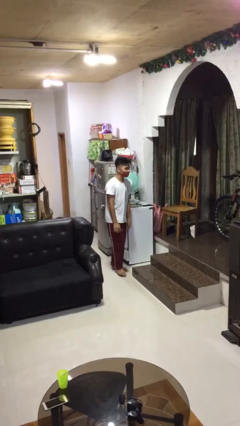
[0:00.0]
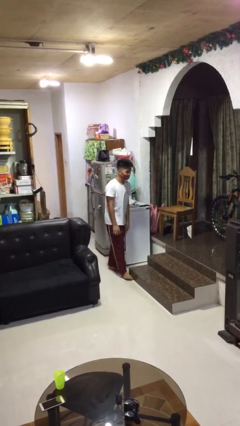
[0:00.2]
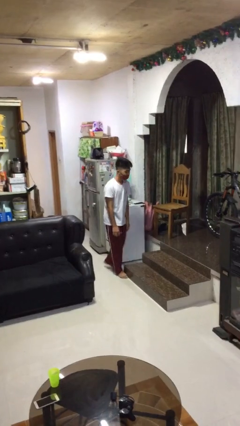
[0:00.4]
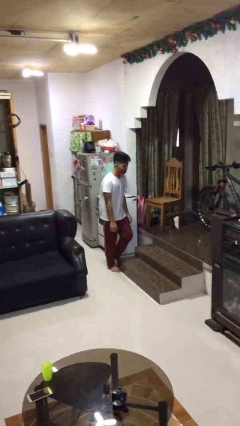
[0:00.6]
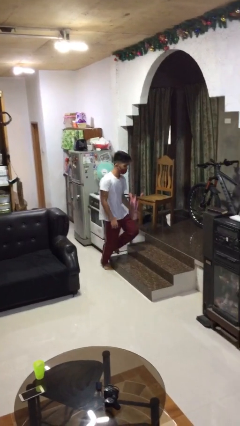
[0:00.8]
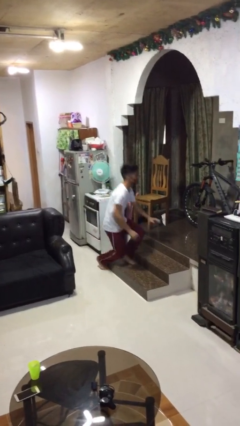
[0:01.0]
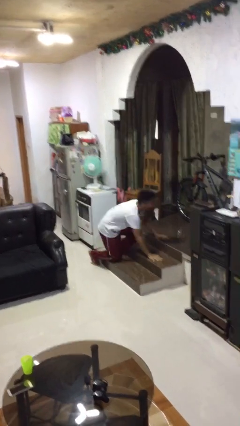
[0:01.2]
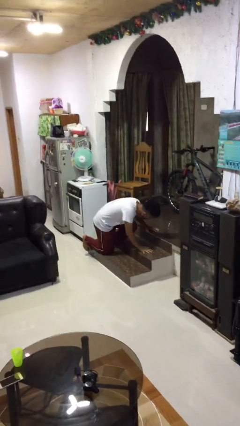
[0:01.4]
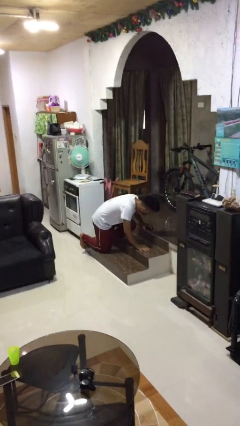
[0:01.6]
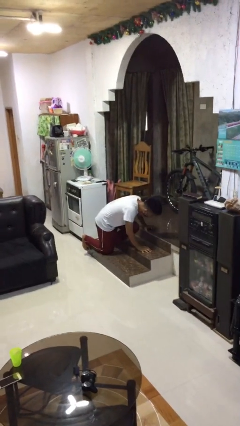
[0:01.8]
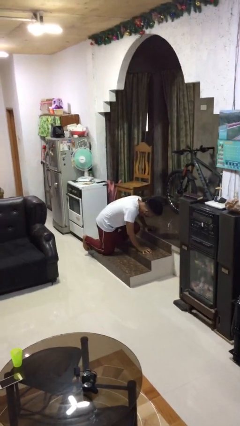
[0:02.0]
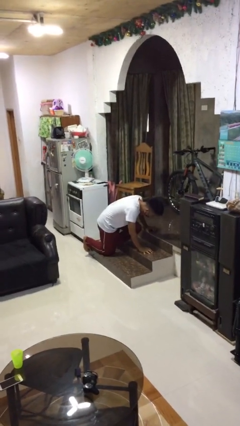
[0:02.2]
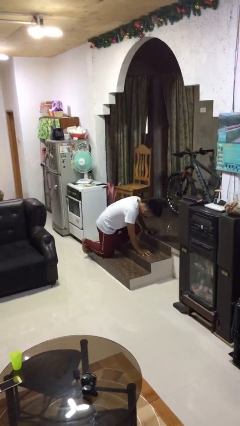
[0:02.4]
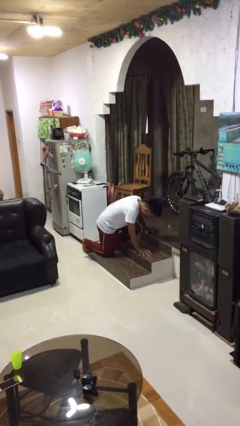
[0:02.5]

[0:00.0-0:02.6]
person trips on object on floor

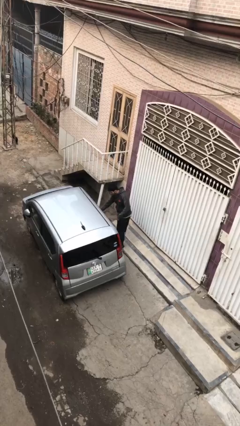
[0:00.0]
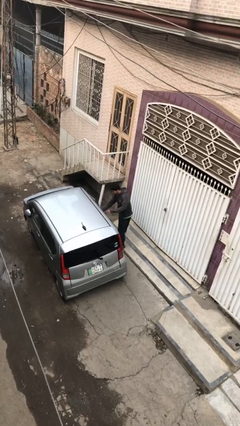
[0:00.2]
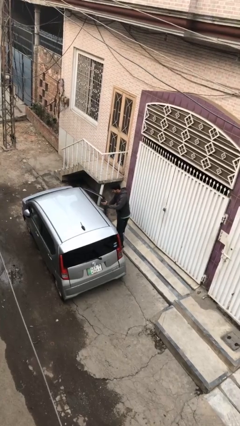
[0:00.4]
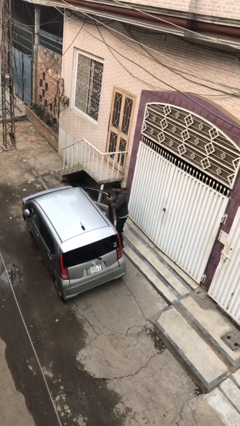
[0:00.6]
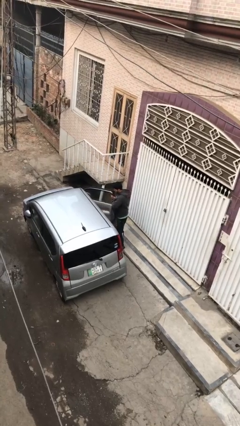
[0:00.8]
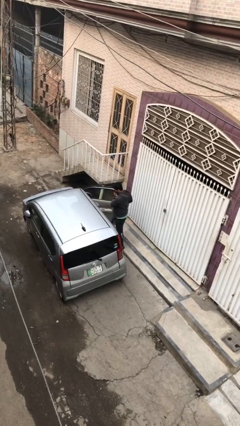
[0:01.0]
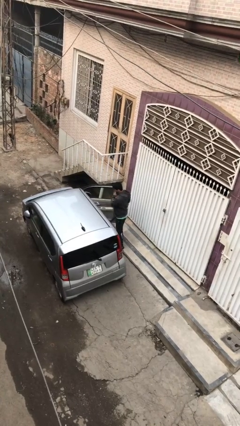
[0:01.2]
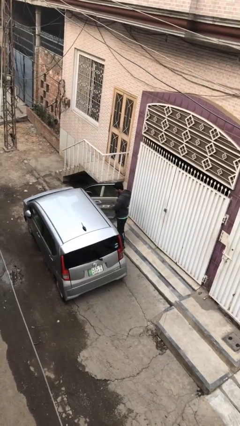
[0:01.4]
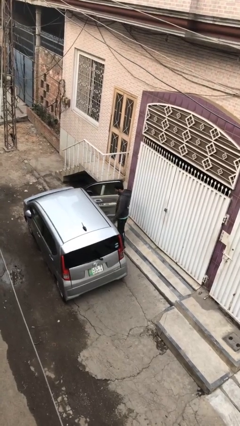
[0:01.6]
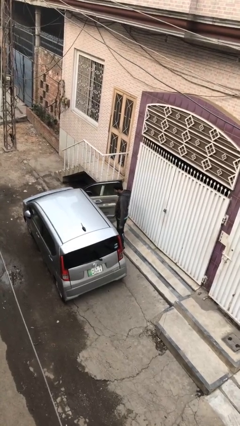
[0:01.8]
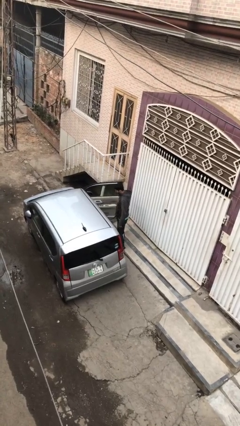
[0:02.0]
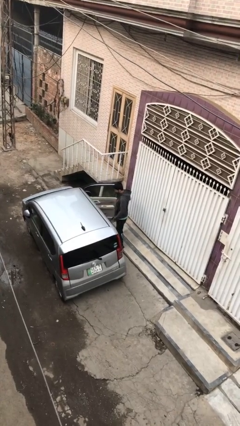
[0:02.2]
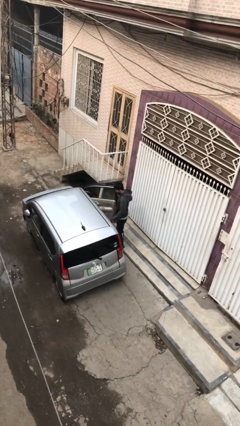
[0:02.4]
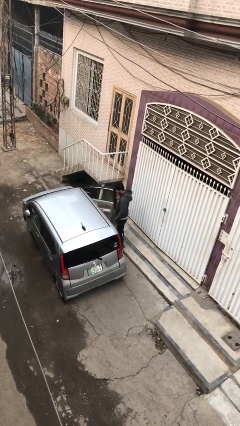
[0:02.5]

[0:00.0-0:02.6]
person opens car door

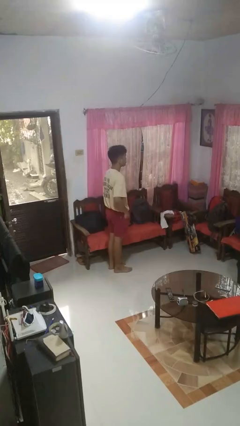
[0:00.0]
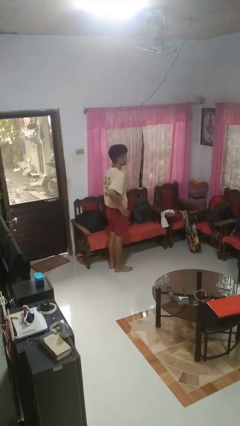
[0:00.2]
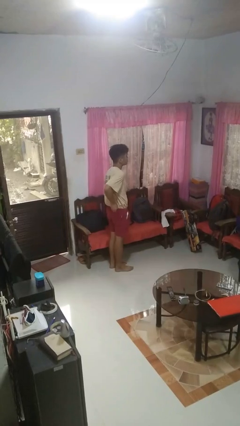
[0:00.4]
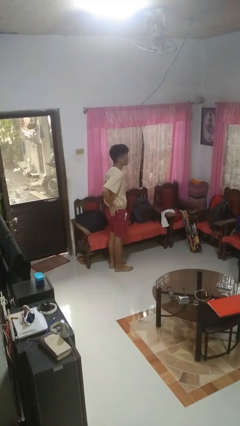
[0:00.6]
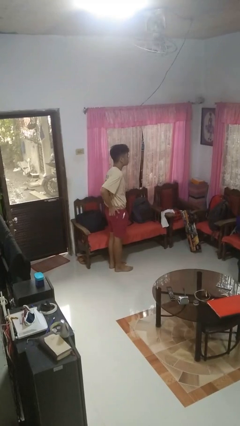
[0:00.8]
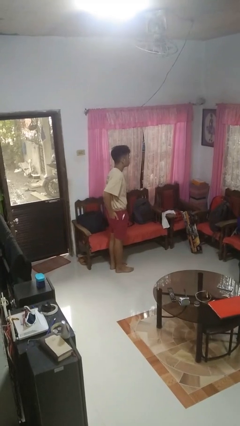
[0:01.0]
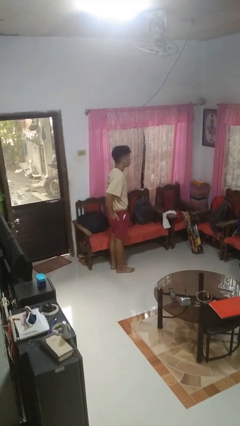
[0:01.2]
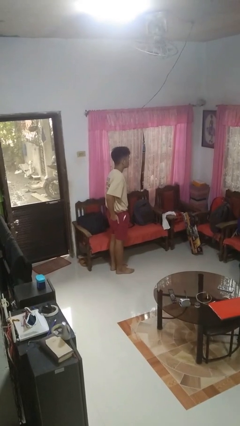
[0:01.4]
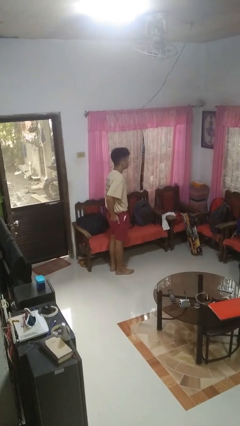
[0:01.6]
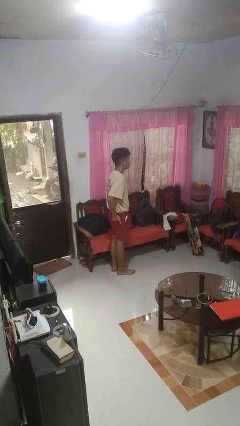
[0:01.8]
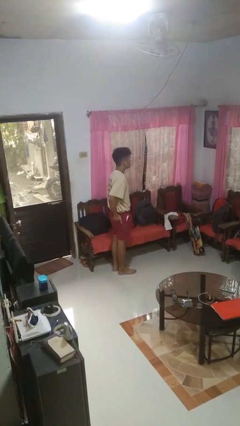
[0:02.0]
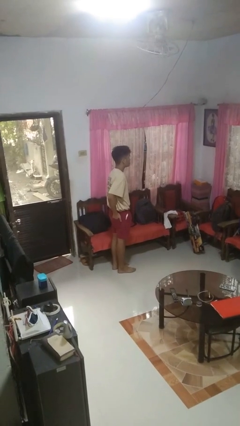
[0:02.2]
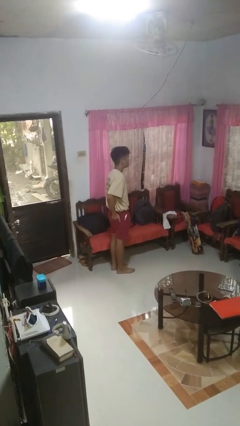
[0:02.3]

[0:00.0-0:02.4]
person puts hands in back pockets

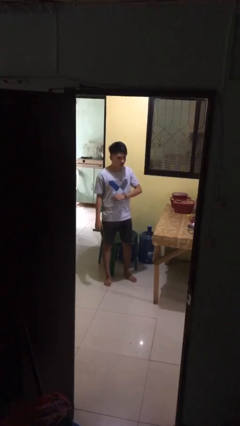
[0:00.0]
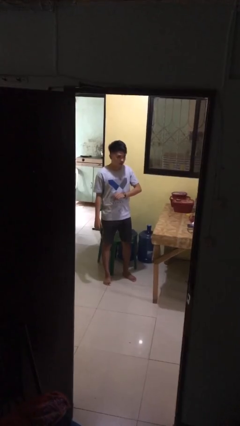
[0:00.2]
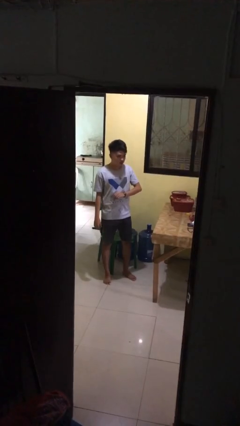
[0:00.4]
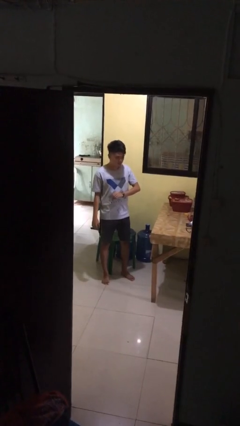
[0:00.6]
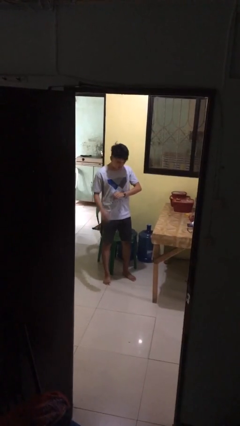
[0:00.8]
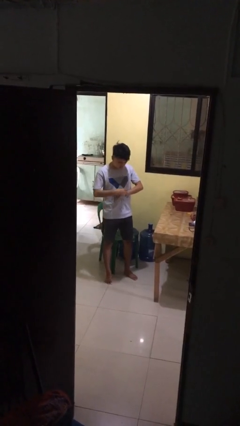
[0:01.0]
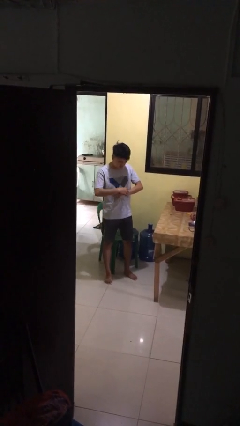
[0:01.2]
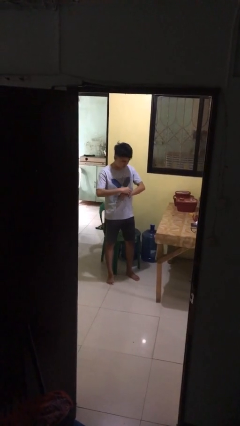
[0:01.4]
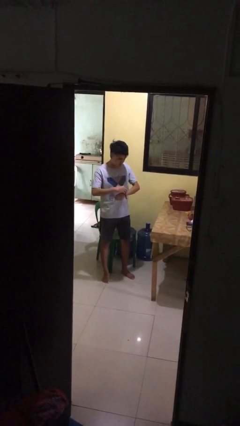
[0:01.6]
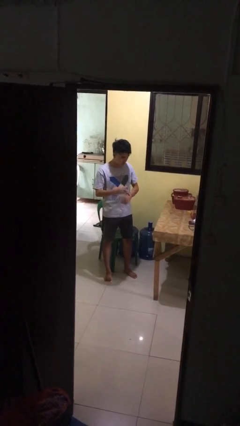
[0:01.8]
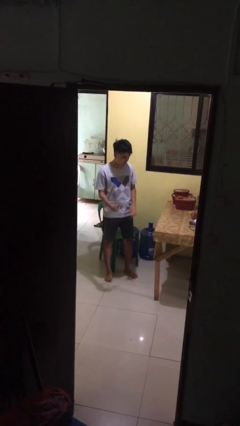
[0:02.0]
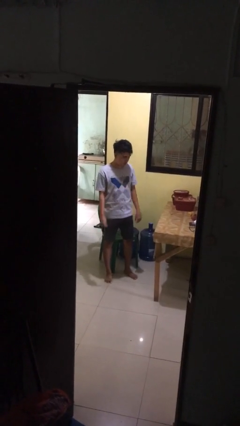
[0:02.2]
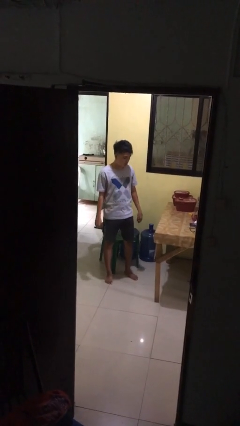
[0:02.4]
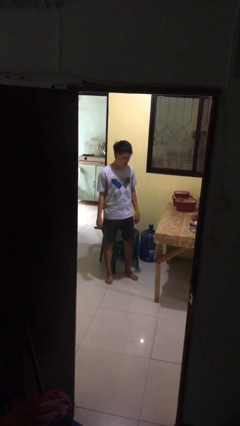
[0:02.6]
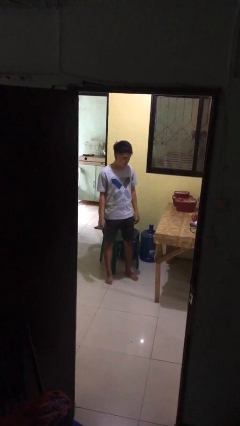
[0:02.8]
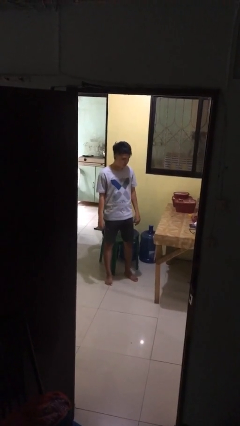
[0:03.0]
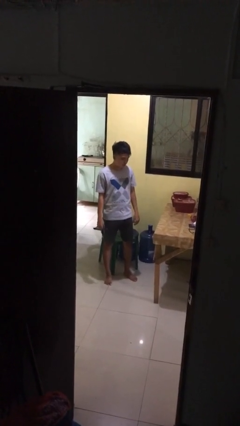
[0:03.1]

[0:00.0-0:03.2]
person takes off wristwatch

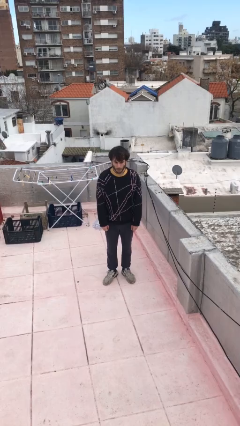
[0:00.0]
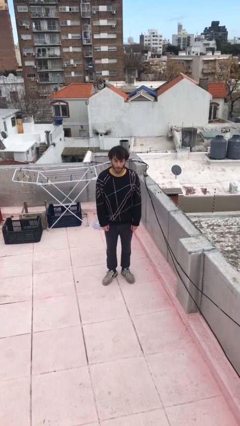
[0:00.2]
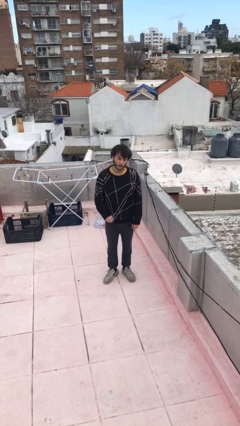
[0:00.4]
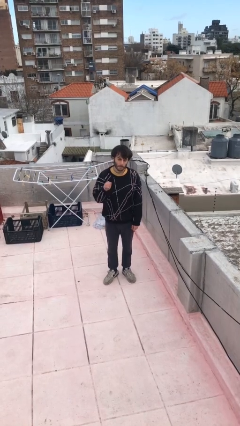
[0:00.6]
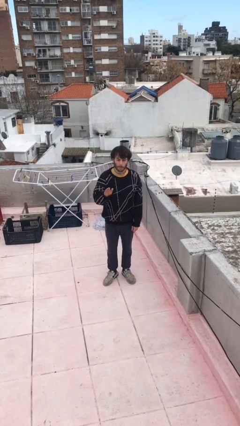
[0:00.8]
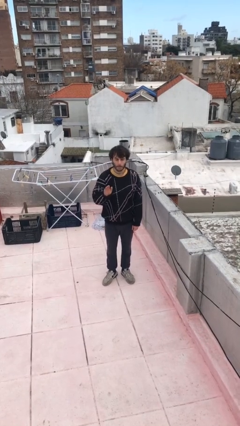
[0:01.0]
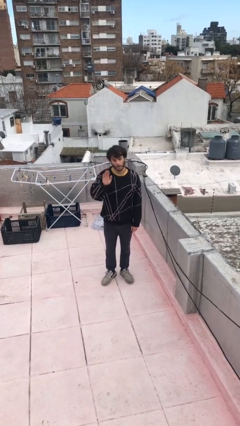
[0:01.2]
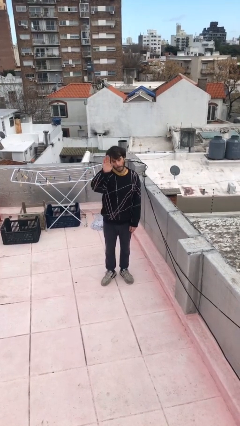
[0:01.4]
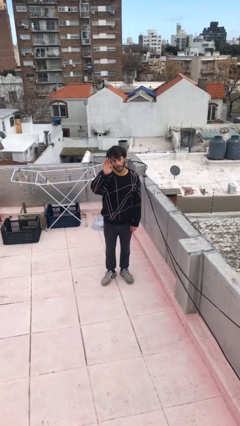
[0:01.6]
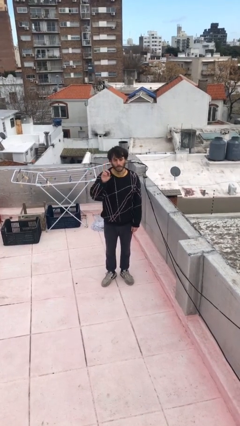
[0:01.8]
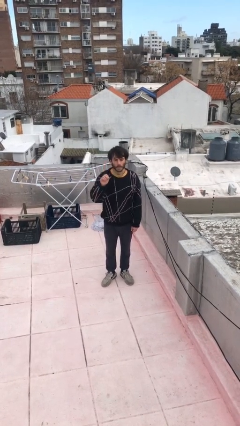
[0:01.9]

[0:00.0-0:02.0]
person gestures swipe up

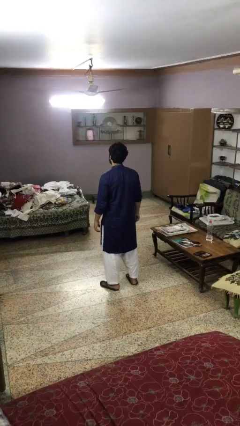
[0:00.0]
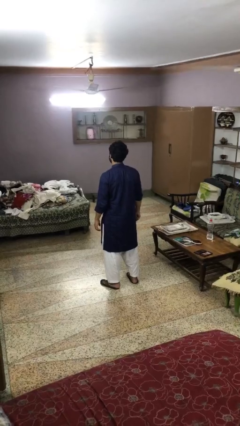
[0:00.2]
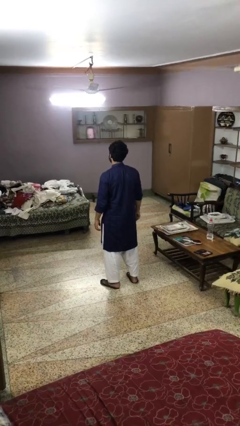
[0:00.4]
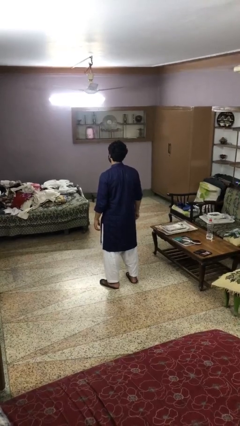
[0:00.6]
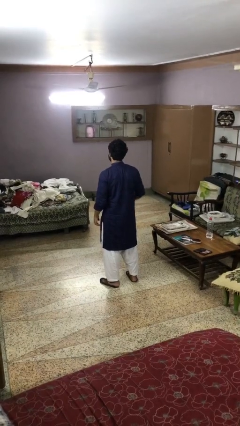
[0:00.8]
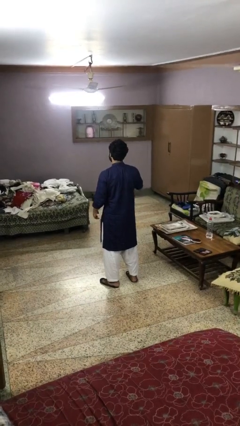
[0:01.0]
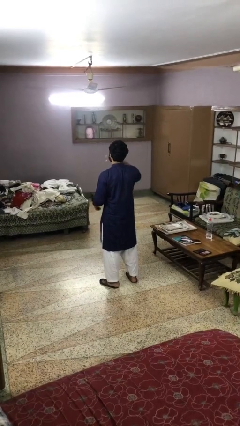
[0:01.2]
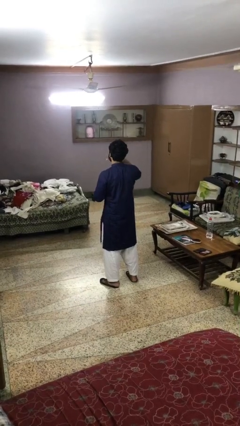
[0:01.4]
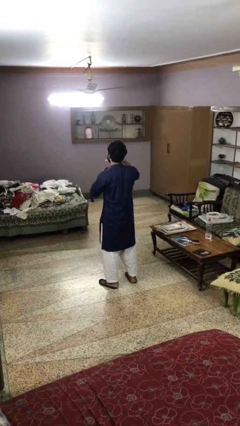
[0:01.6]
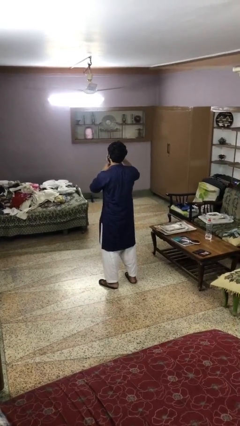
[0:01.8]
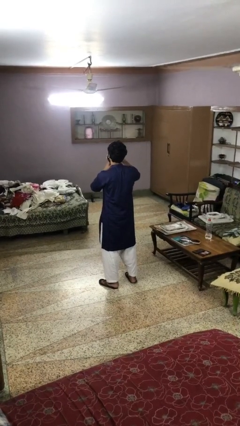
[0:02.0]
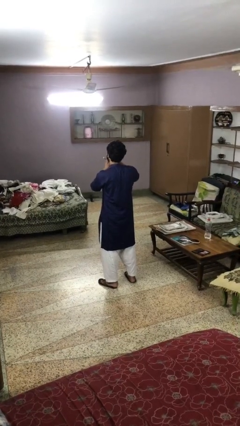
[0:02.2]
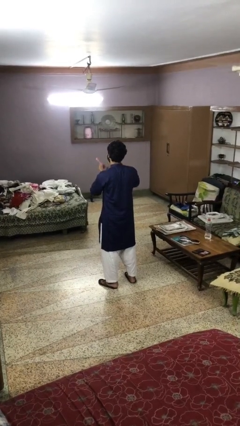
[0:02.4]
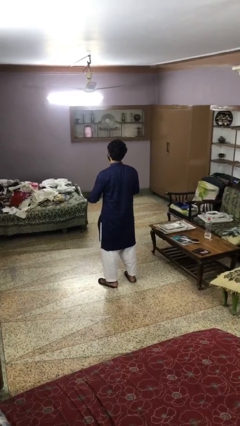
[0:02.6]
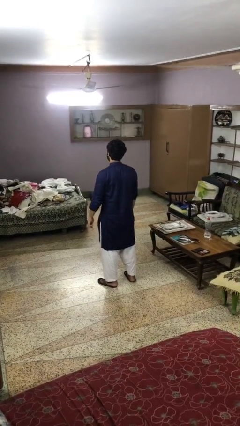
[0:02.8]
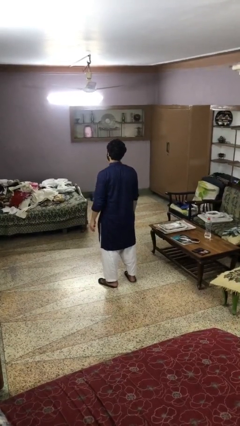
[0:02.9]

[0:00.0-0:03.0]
person brushes teeth

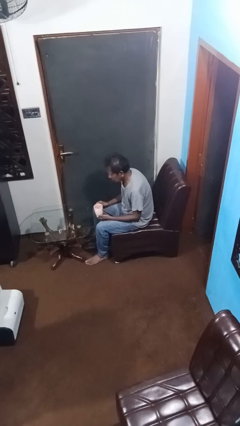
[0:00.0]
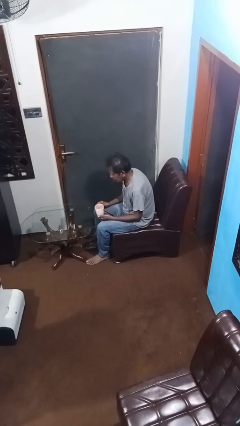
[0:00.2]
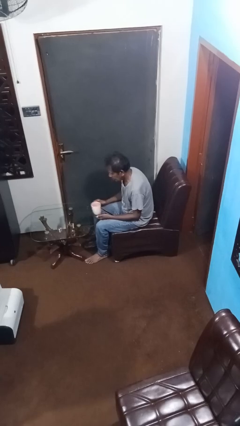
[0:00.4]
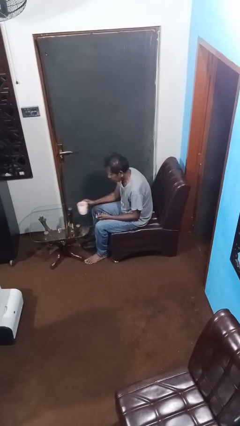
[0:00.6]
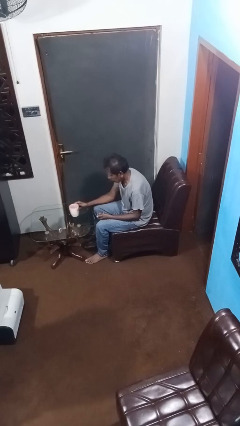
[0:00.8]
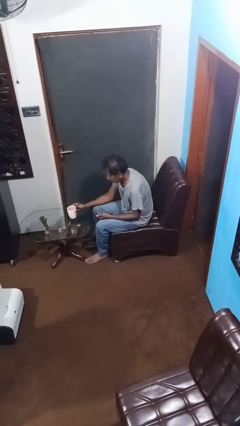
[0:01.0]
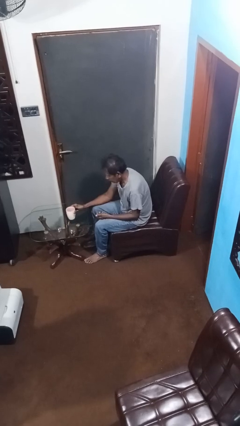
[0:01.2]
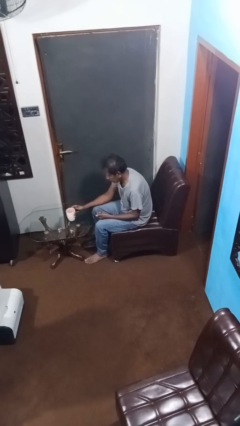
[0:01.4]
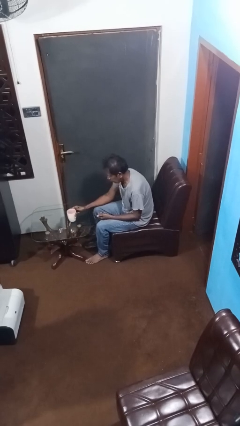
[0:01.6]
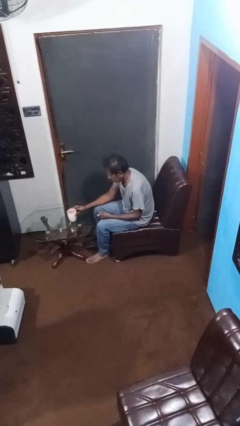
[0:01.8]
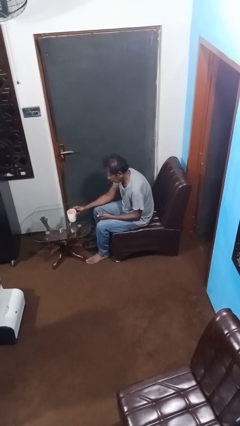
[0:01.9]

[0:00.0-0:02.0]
person puts down object on table
